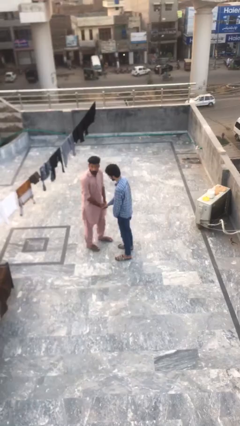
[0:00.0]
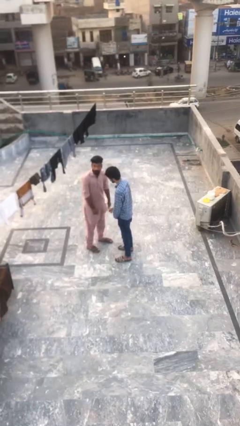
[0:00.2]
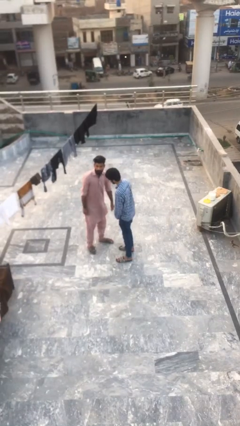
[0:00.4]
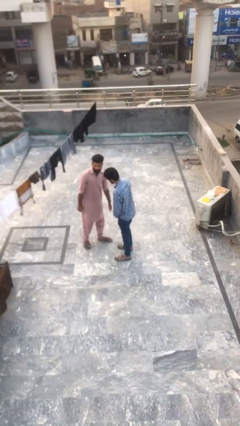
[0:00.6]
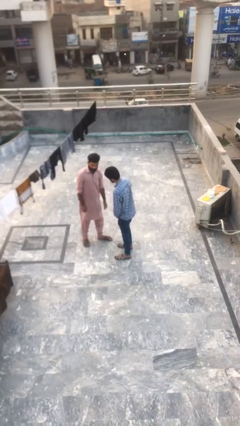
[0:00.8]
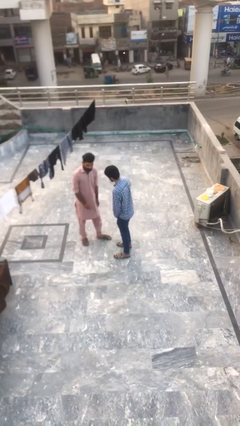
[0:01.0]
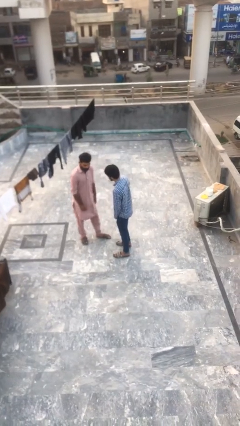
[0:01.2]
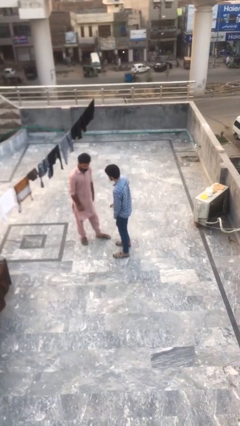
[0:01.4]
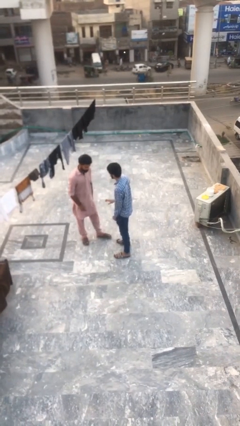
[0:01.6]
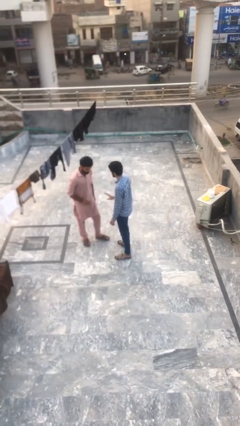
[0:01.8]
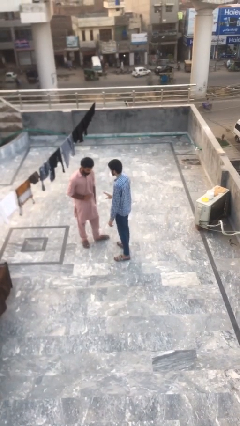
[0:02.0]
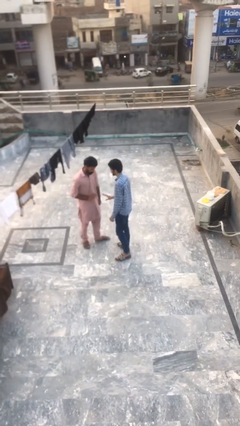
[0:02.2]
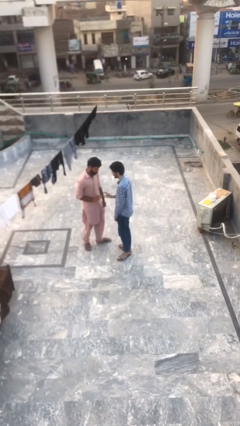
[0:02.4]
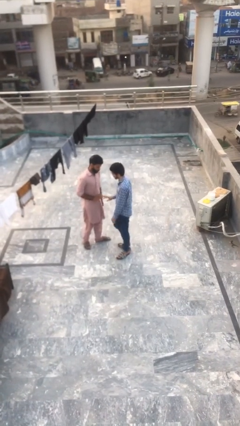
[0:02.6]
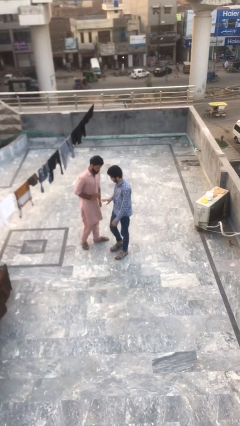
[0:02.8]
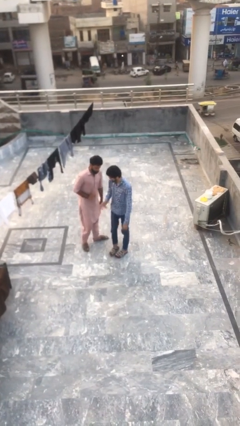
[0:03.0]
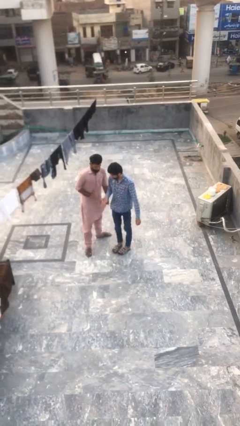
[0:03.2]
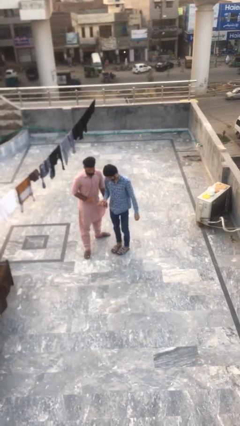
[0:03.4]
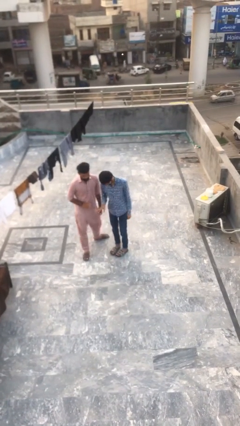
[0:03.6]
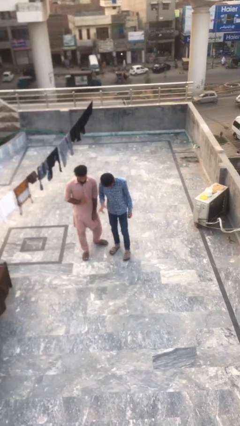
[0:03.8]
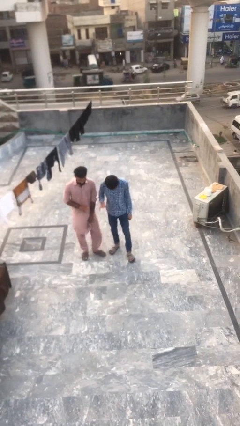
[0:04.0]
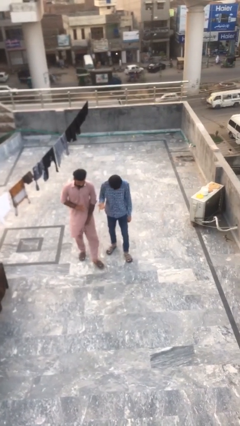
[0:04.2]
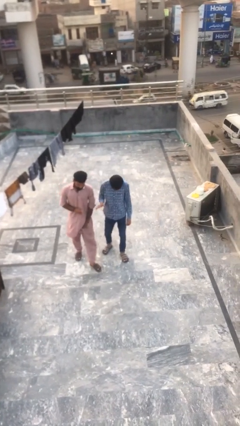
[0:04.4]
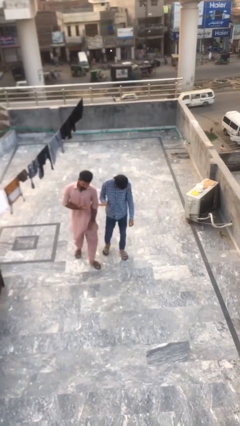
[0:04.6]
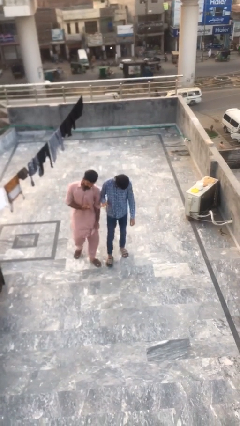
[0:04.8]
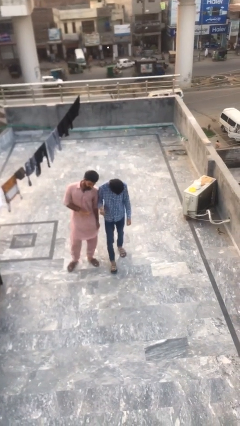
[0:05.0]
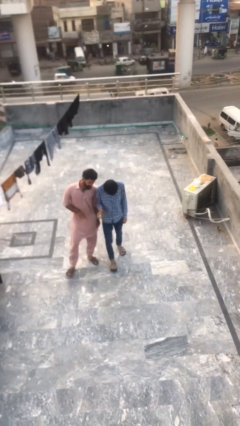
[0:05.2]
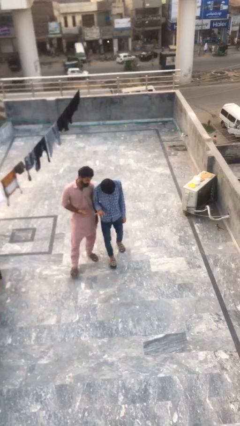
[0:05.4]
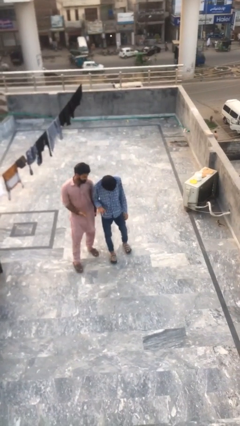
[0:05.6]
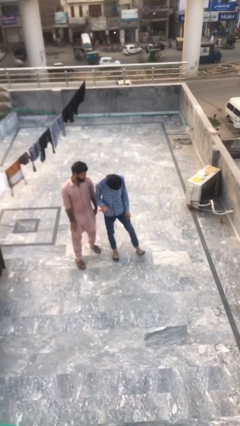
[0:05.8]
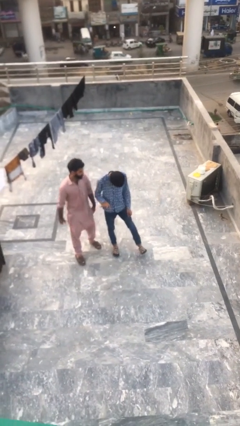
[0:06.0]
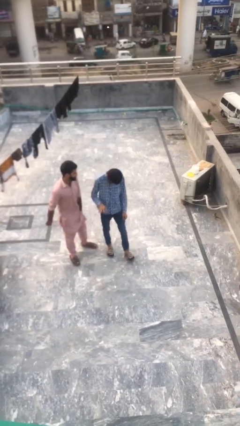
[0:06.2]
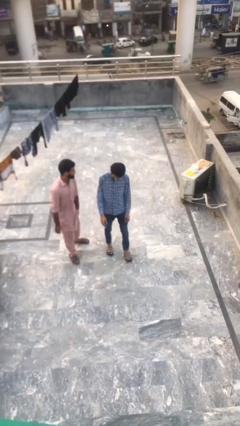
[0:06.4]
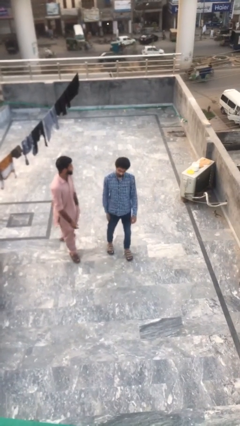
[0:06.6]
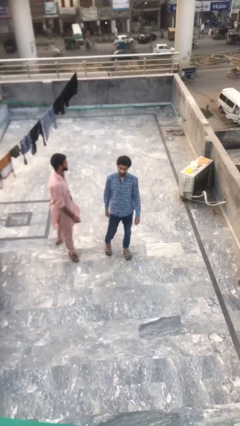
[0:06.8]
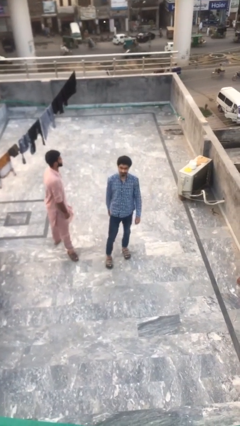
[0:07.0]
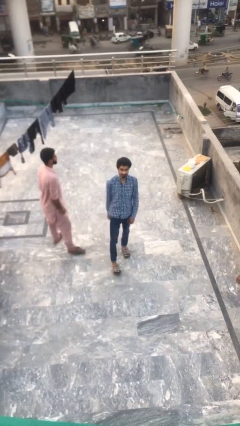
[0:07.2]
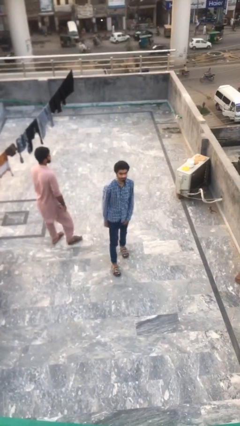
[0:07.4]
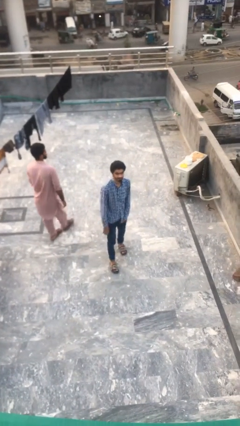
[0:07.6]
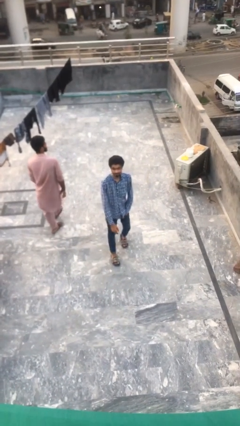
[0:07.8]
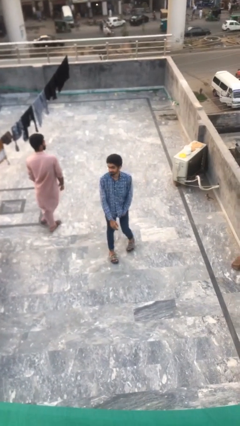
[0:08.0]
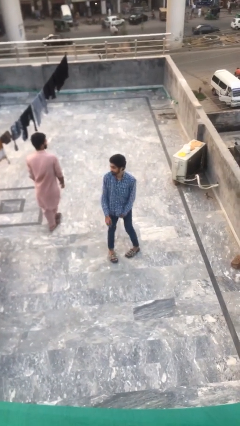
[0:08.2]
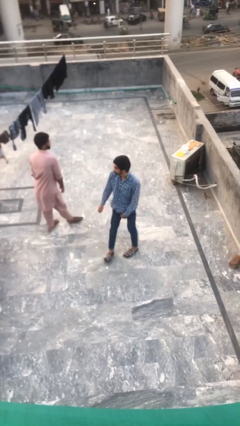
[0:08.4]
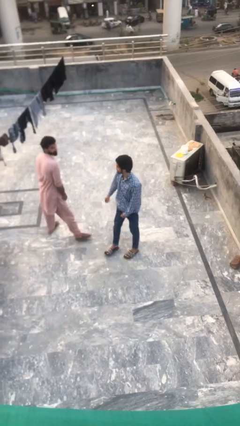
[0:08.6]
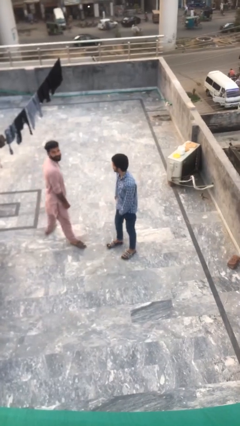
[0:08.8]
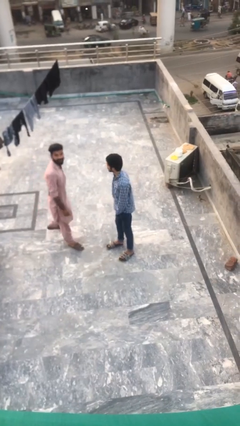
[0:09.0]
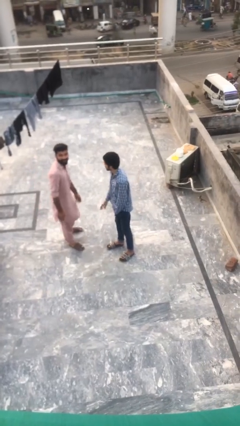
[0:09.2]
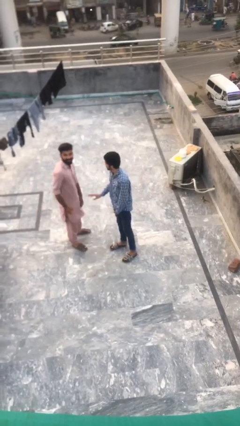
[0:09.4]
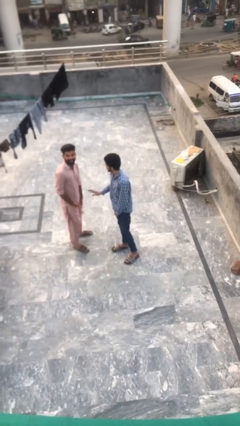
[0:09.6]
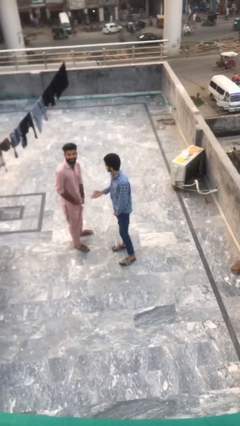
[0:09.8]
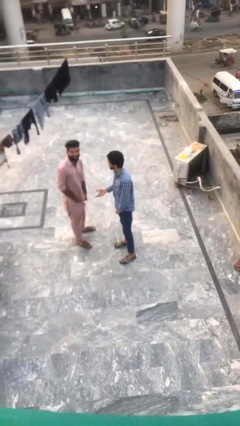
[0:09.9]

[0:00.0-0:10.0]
person talks to person

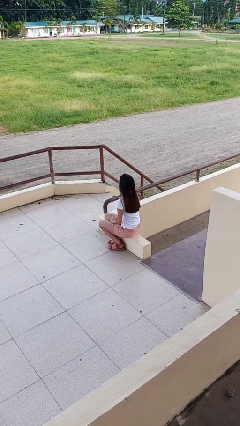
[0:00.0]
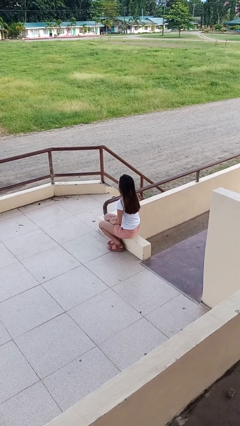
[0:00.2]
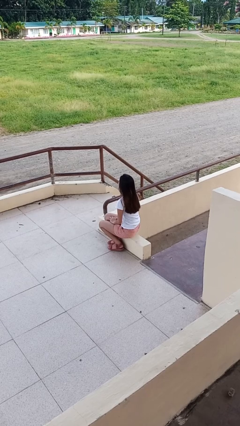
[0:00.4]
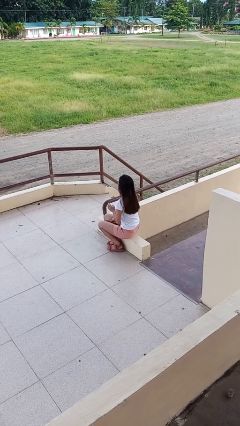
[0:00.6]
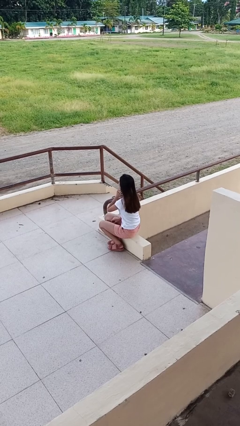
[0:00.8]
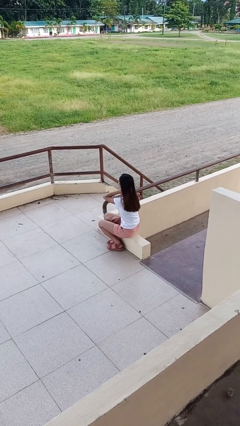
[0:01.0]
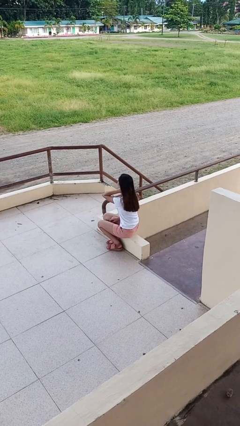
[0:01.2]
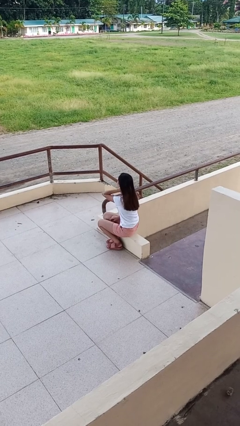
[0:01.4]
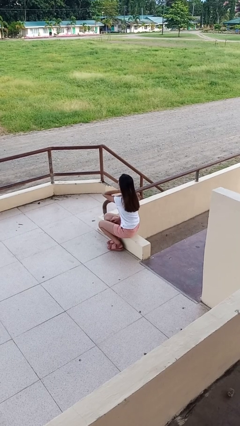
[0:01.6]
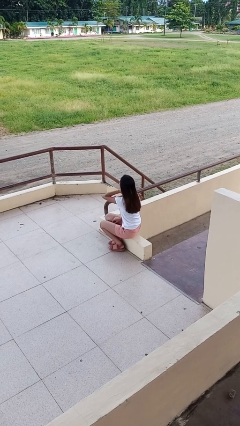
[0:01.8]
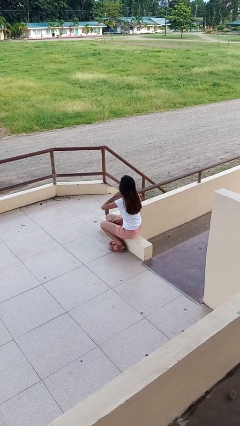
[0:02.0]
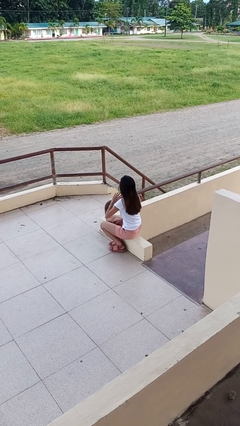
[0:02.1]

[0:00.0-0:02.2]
person rubs neck

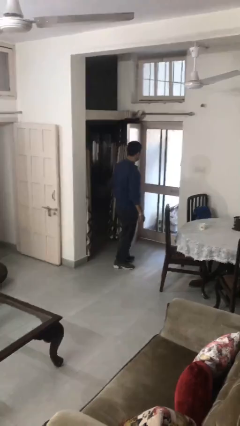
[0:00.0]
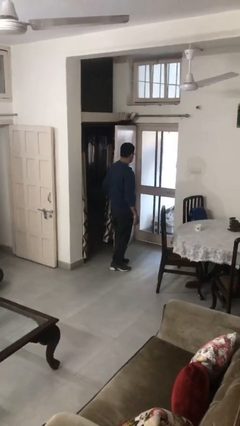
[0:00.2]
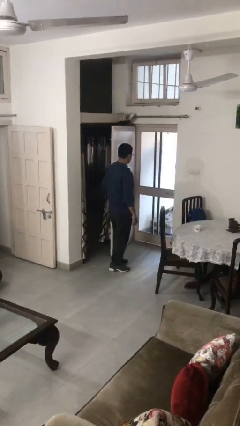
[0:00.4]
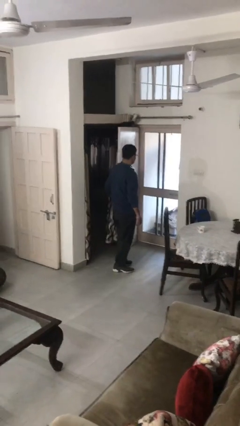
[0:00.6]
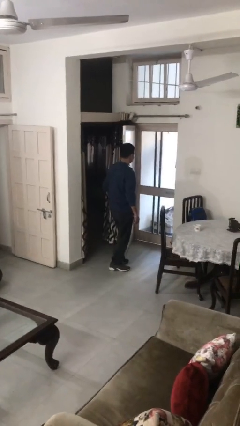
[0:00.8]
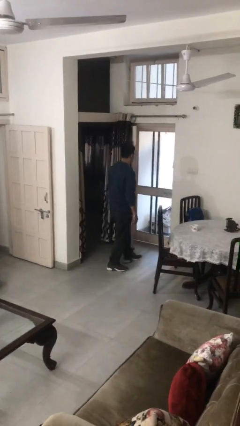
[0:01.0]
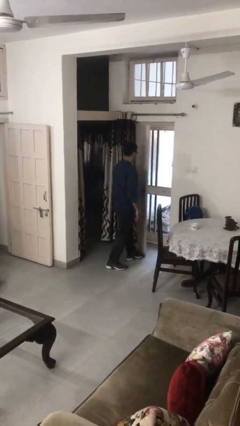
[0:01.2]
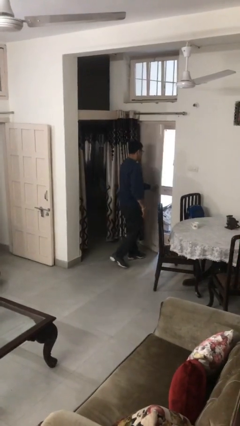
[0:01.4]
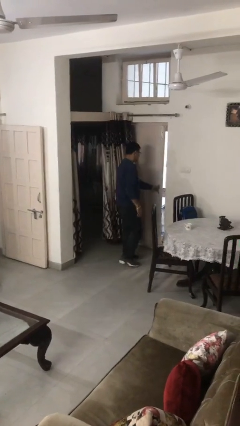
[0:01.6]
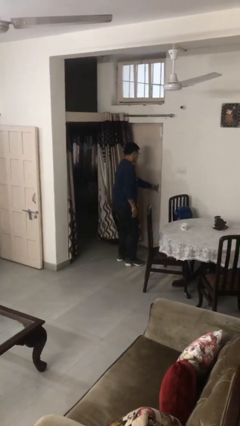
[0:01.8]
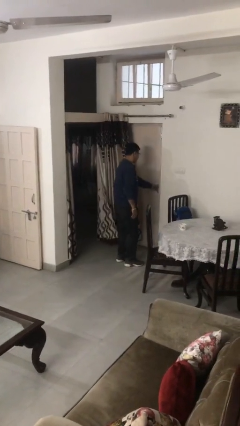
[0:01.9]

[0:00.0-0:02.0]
person closes facility door

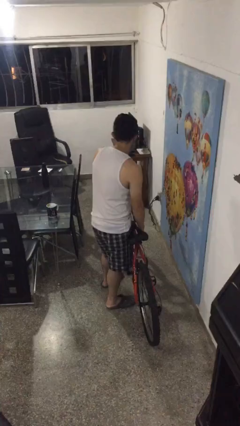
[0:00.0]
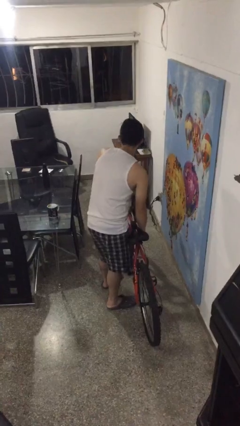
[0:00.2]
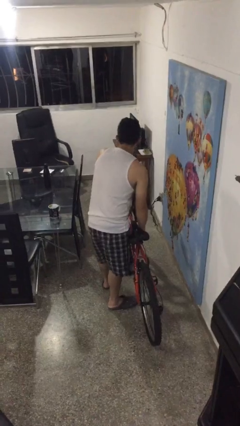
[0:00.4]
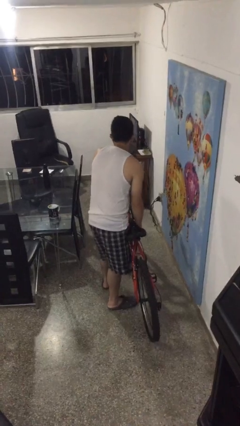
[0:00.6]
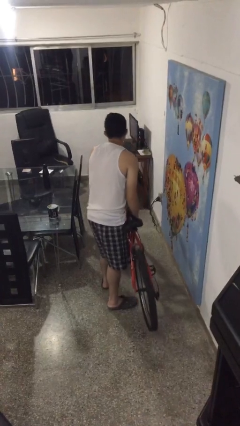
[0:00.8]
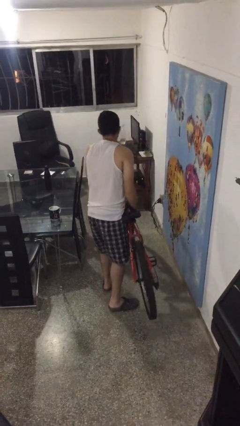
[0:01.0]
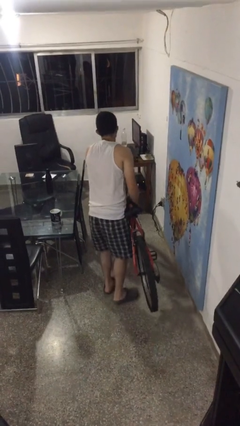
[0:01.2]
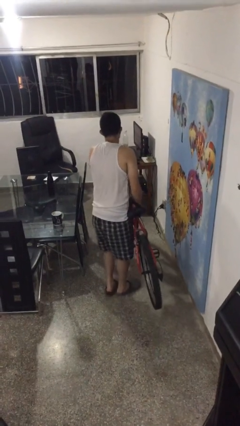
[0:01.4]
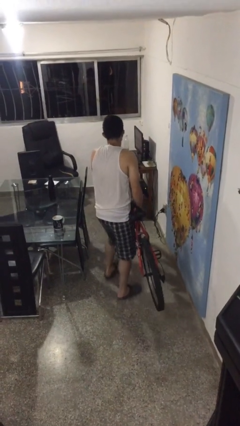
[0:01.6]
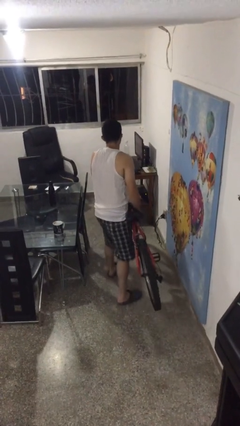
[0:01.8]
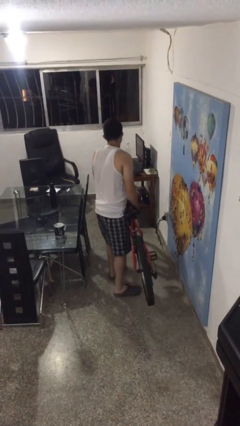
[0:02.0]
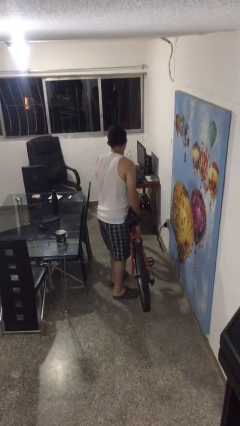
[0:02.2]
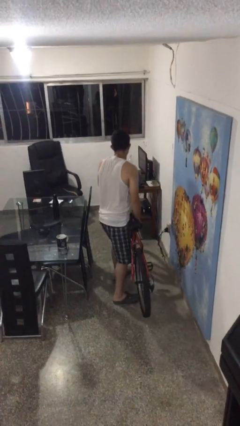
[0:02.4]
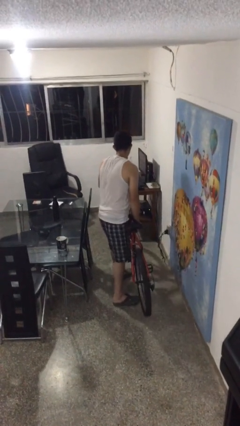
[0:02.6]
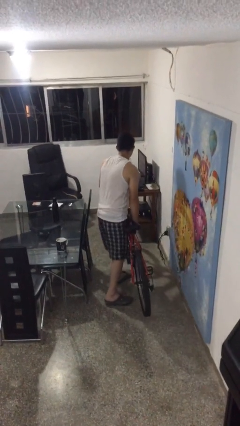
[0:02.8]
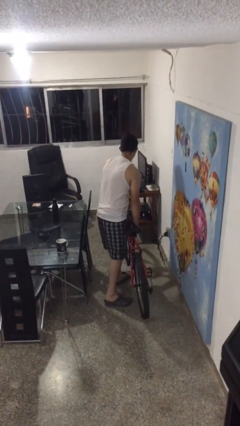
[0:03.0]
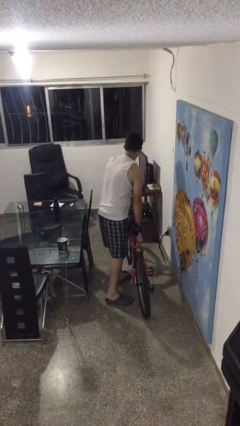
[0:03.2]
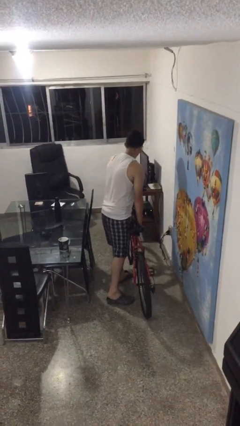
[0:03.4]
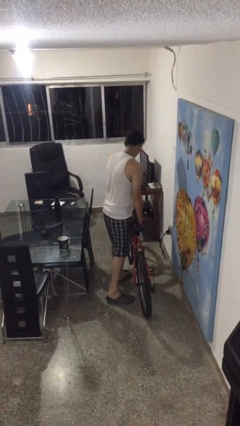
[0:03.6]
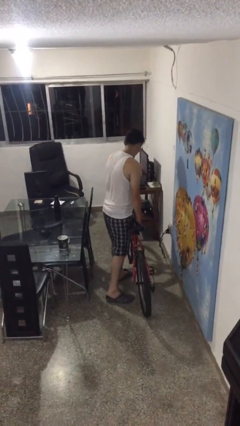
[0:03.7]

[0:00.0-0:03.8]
person carries bicycle
